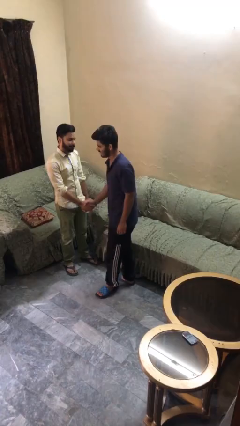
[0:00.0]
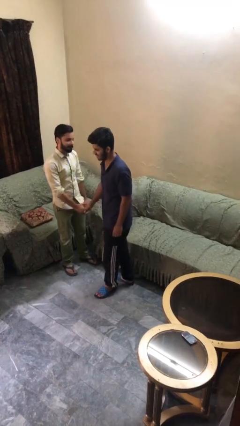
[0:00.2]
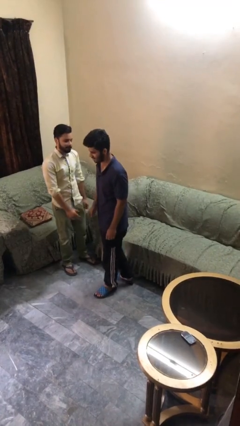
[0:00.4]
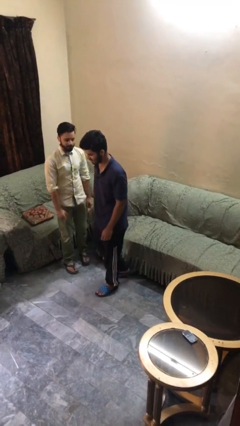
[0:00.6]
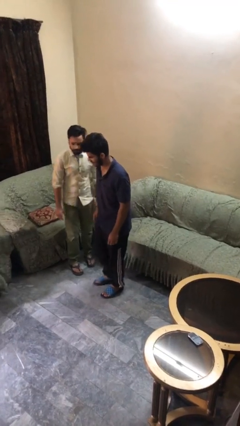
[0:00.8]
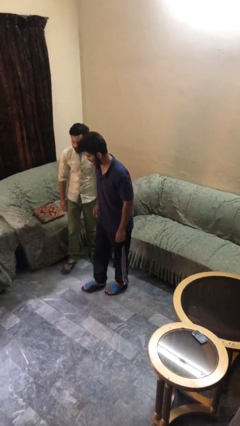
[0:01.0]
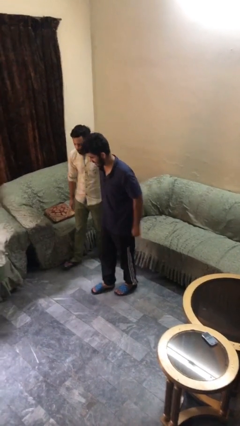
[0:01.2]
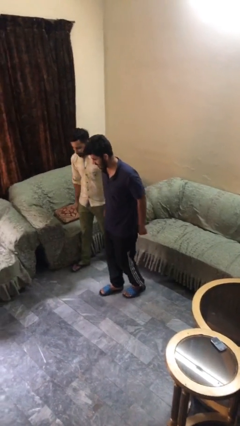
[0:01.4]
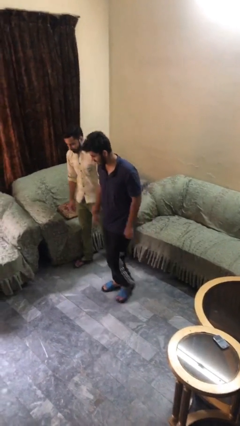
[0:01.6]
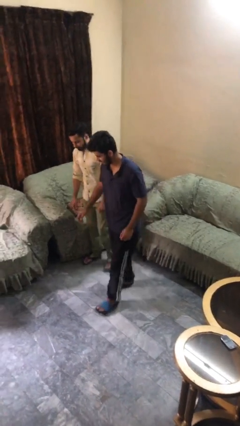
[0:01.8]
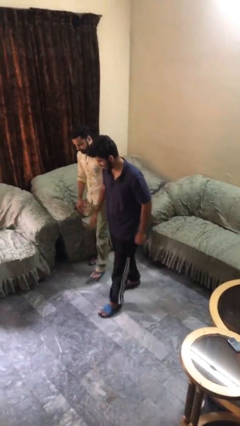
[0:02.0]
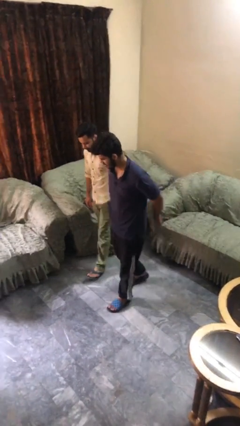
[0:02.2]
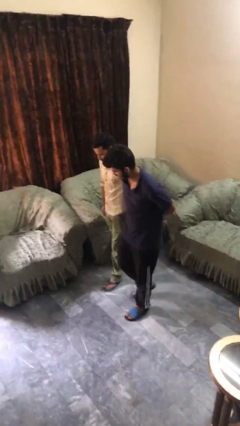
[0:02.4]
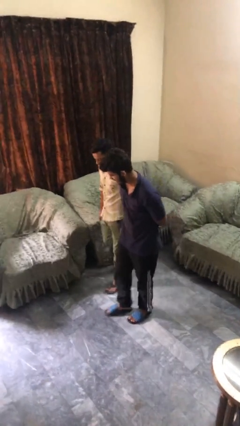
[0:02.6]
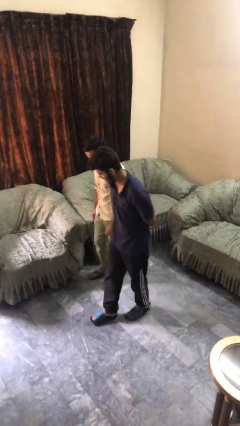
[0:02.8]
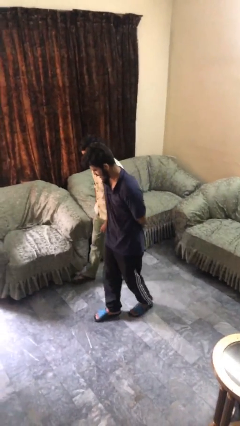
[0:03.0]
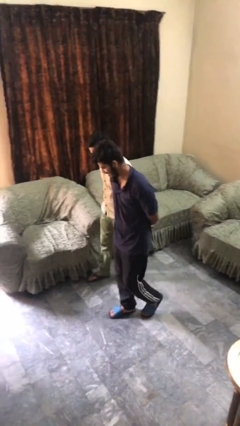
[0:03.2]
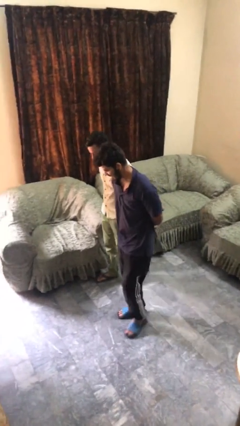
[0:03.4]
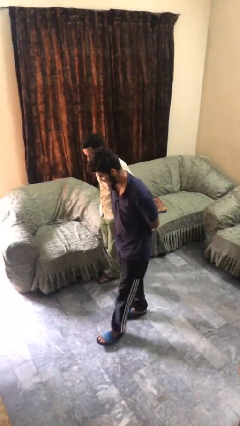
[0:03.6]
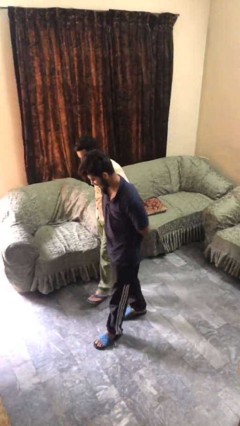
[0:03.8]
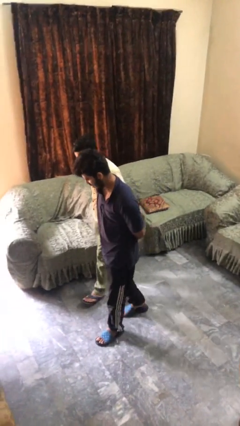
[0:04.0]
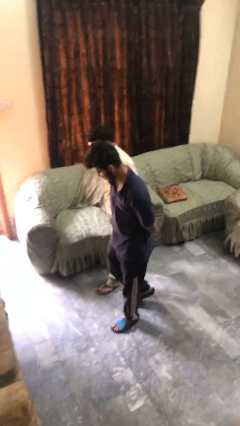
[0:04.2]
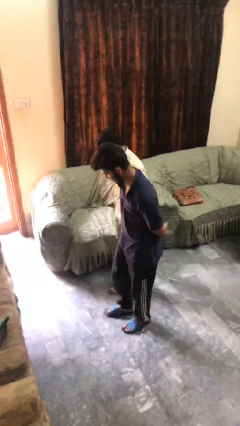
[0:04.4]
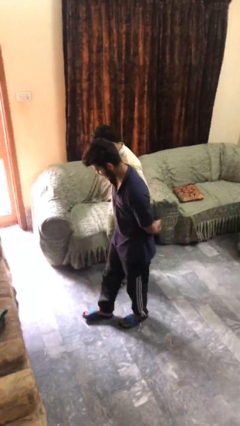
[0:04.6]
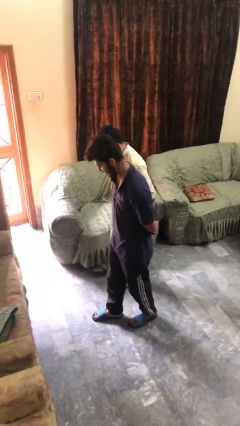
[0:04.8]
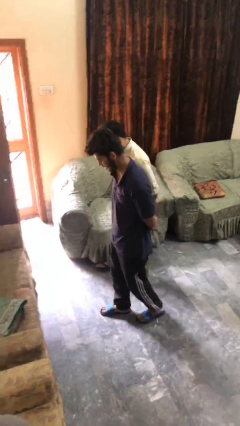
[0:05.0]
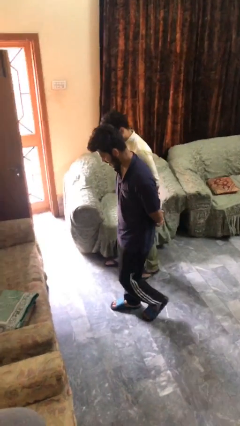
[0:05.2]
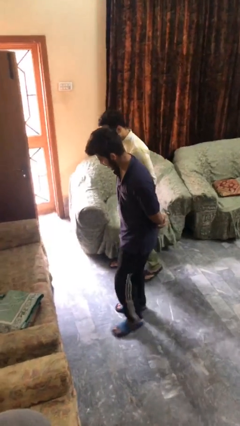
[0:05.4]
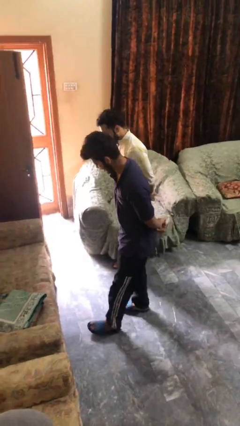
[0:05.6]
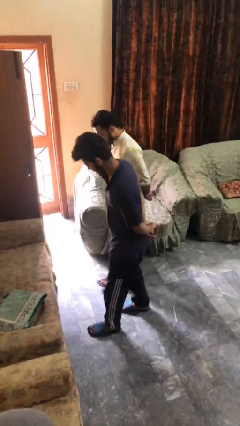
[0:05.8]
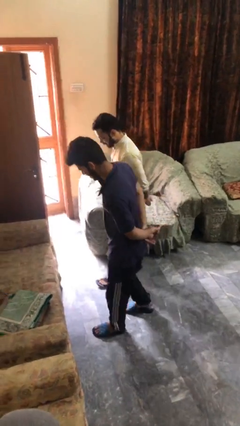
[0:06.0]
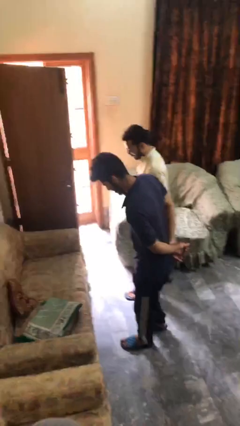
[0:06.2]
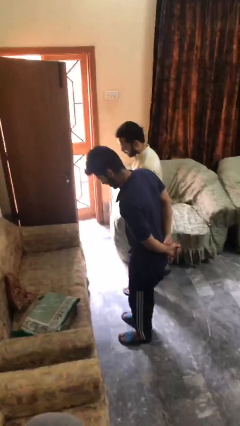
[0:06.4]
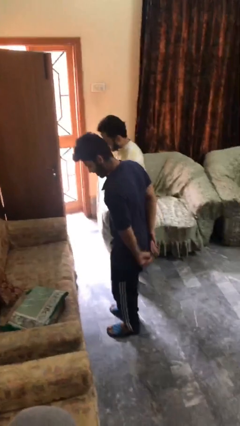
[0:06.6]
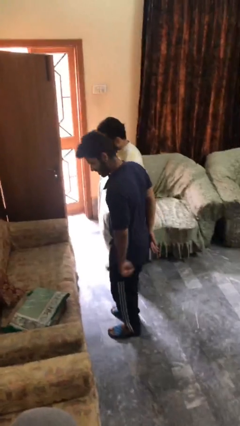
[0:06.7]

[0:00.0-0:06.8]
person talks to person

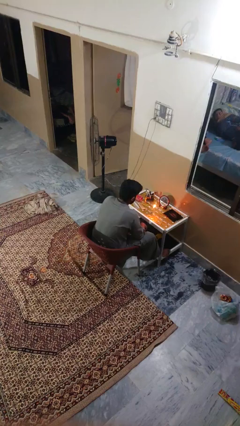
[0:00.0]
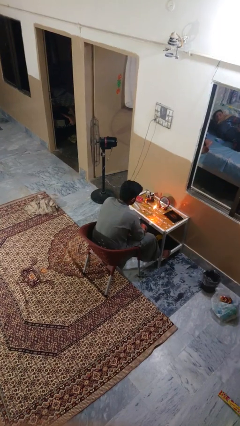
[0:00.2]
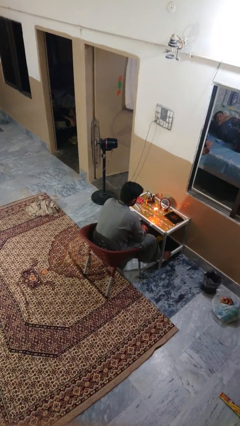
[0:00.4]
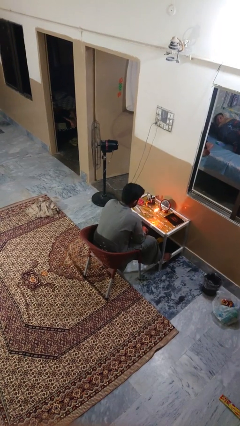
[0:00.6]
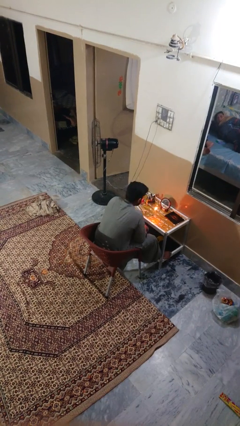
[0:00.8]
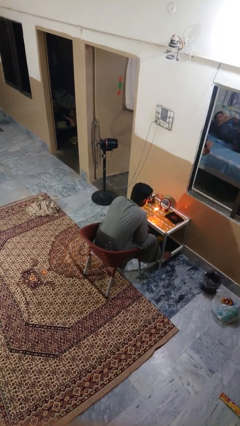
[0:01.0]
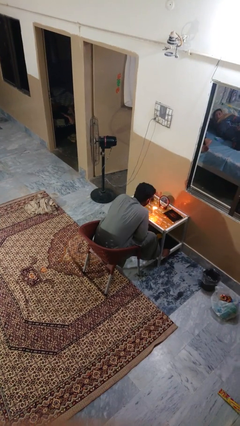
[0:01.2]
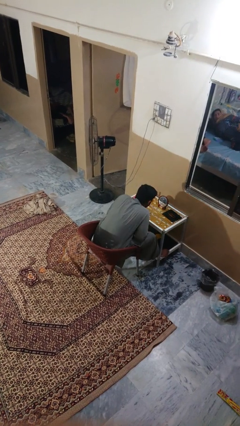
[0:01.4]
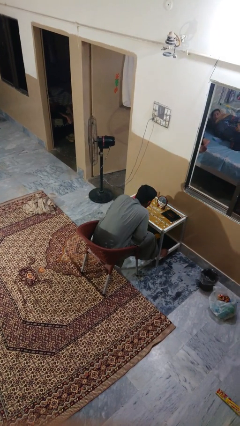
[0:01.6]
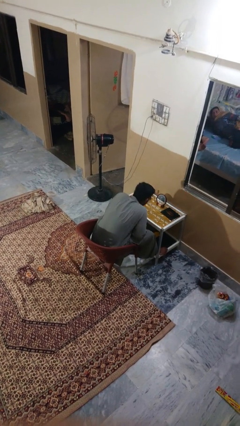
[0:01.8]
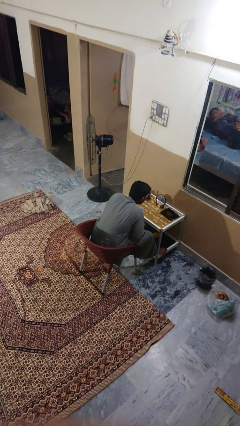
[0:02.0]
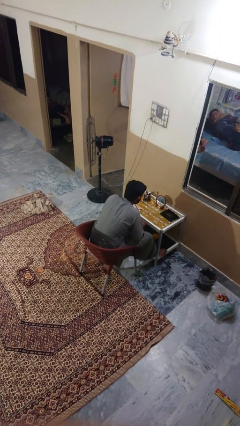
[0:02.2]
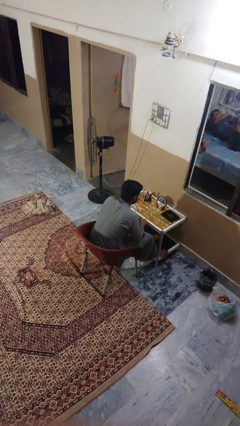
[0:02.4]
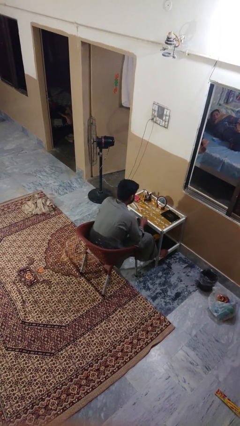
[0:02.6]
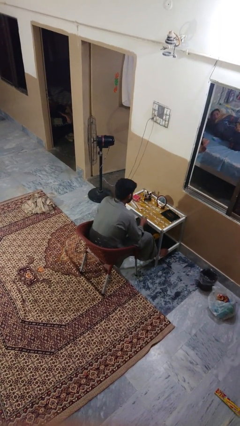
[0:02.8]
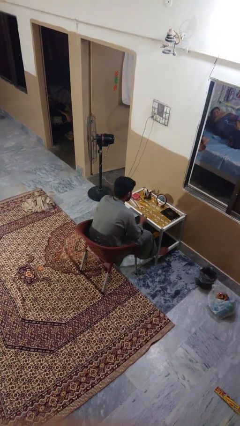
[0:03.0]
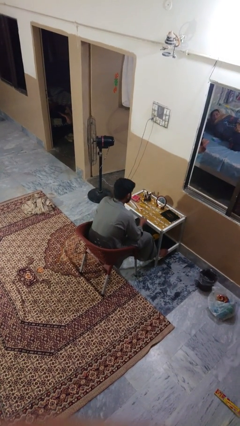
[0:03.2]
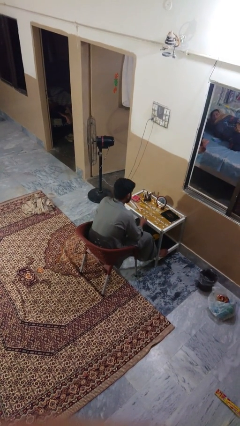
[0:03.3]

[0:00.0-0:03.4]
person extinguishes candle

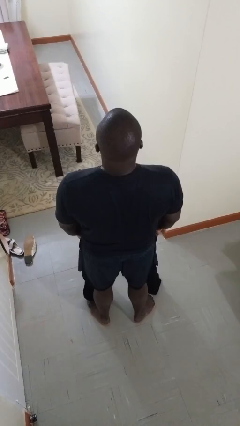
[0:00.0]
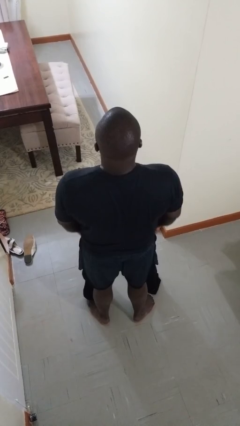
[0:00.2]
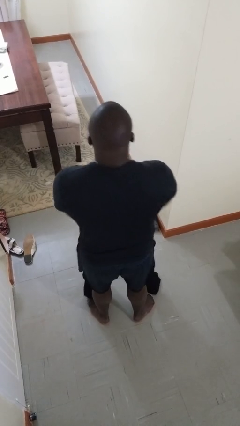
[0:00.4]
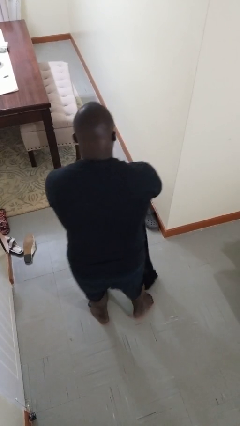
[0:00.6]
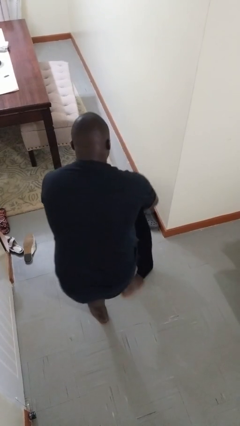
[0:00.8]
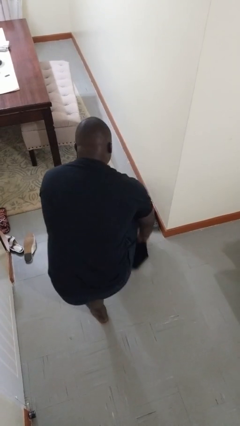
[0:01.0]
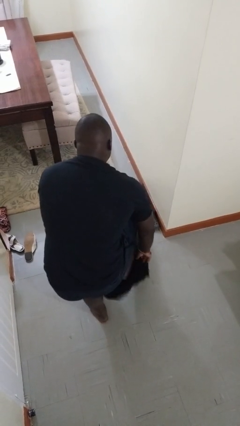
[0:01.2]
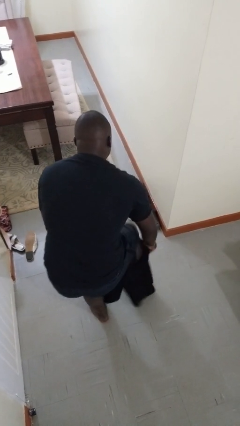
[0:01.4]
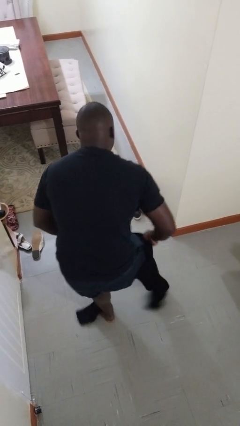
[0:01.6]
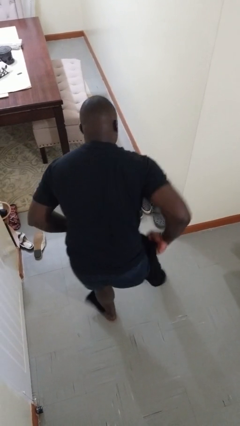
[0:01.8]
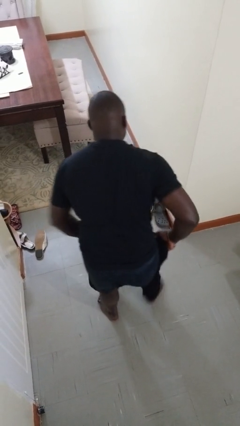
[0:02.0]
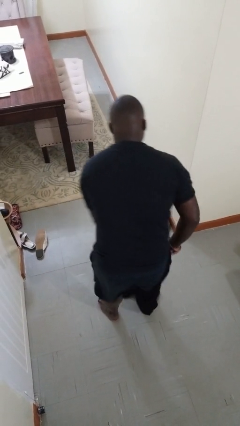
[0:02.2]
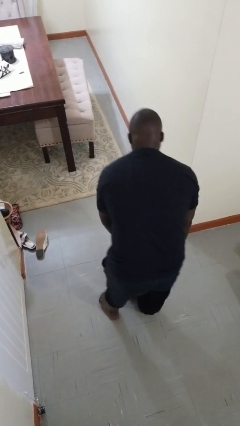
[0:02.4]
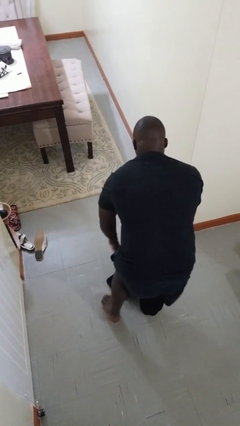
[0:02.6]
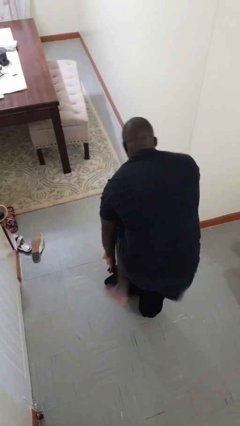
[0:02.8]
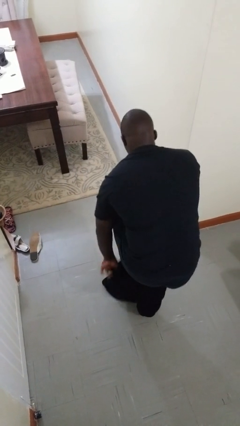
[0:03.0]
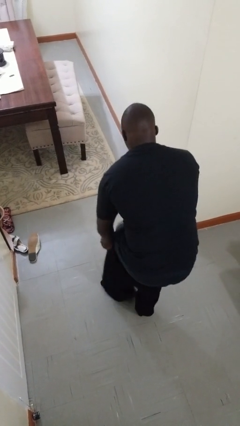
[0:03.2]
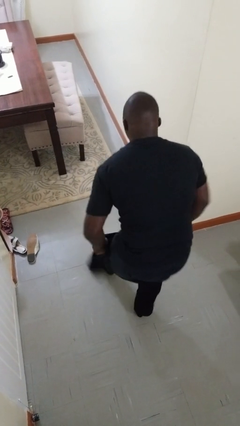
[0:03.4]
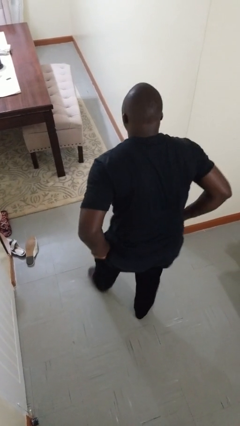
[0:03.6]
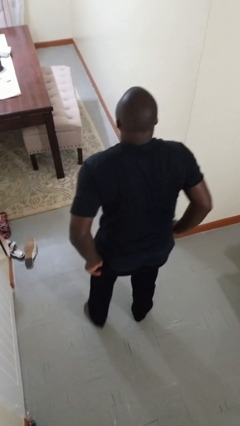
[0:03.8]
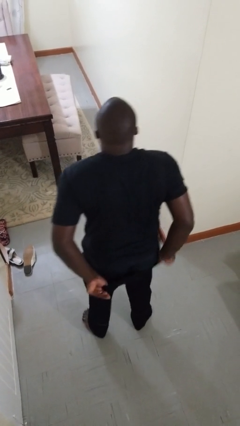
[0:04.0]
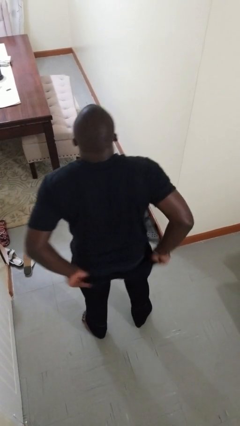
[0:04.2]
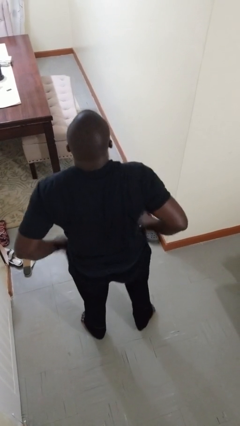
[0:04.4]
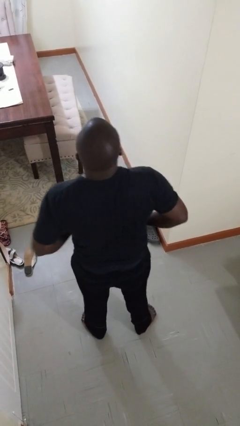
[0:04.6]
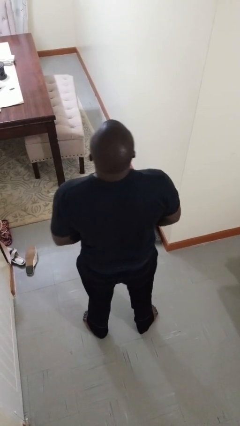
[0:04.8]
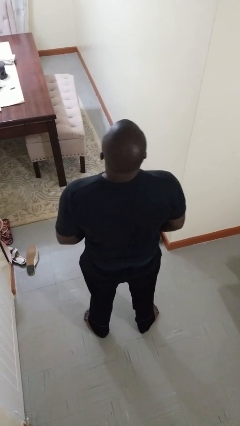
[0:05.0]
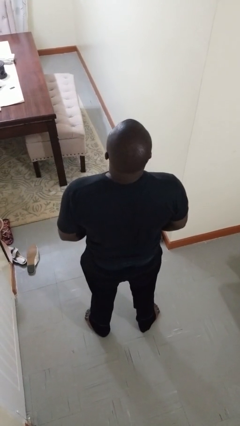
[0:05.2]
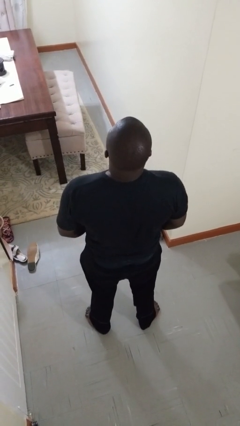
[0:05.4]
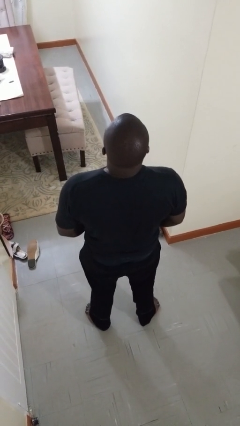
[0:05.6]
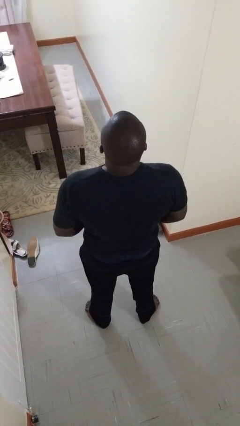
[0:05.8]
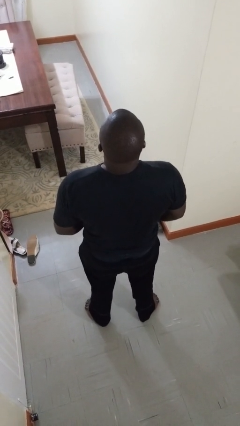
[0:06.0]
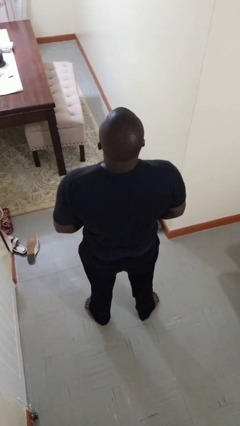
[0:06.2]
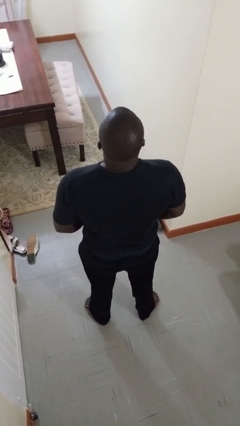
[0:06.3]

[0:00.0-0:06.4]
person takes off pants

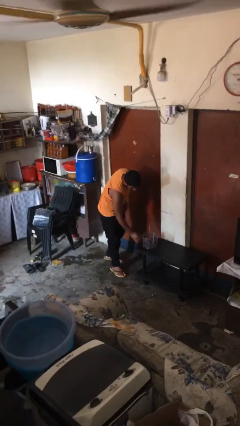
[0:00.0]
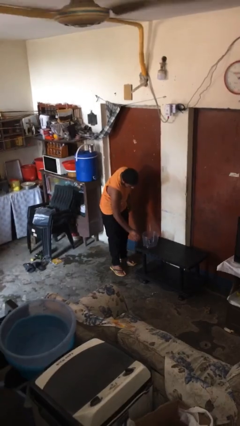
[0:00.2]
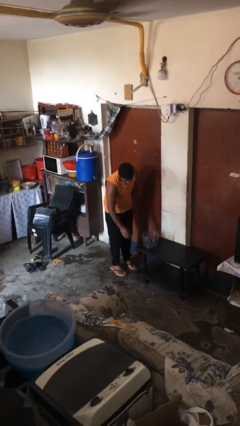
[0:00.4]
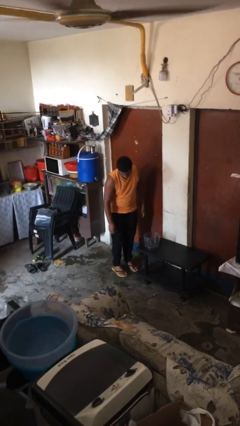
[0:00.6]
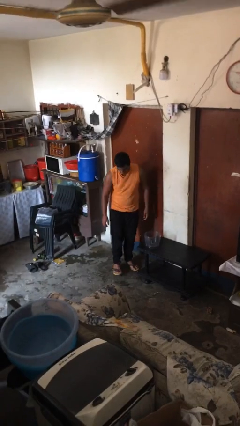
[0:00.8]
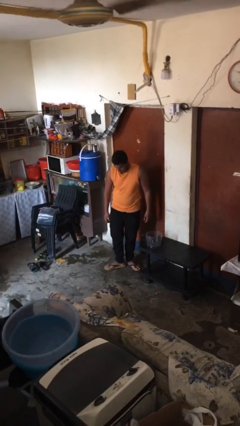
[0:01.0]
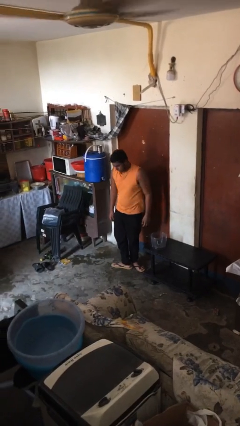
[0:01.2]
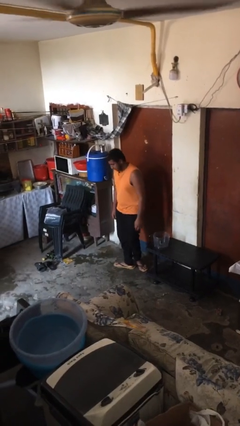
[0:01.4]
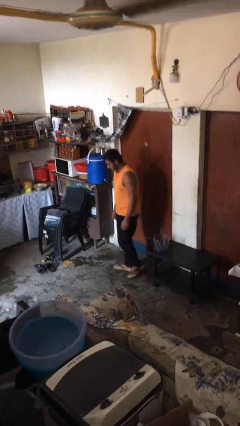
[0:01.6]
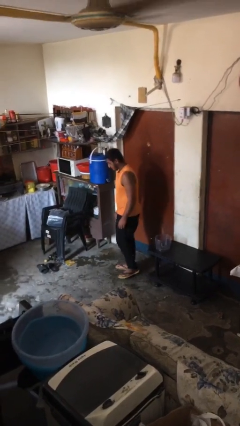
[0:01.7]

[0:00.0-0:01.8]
person puts down object on table
